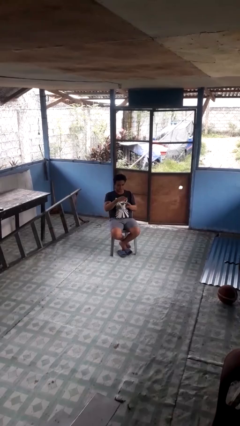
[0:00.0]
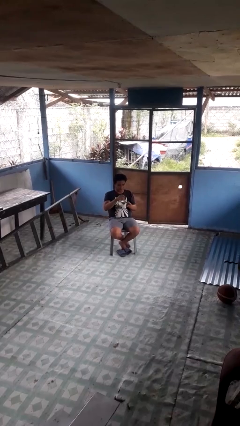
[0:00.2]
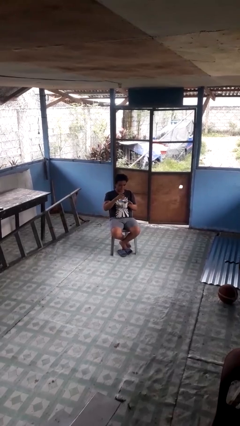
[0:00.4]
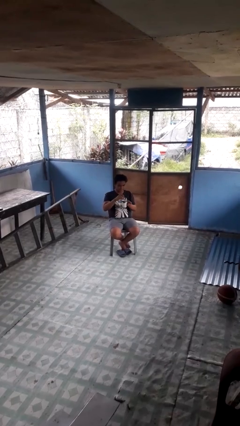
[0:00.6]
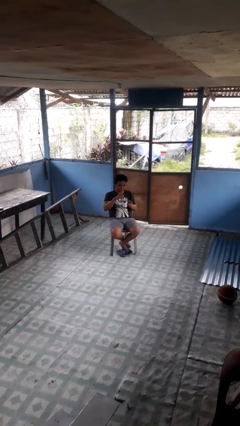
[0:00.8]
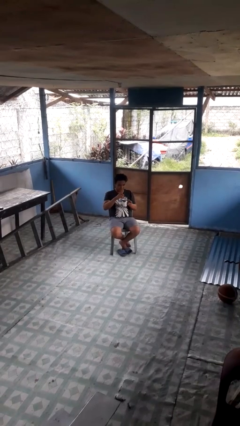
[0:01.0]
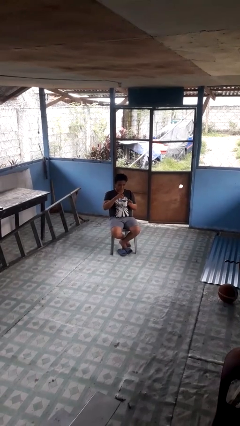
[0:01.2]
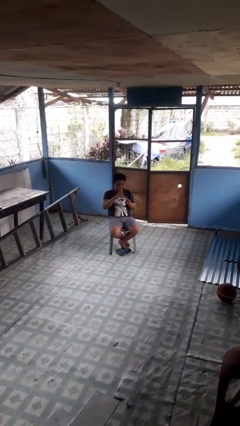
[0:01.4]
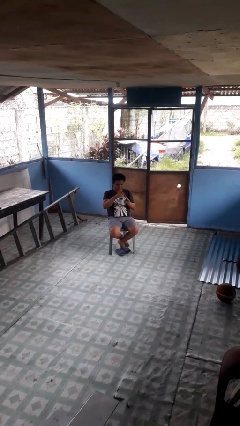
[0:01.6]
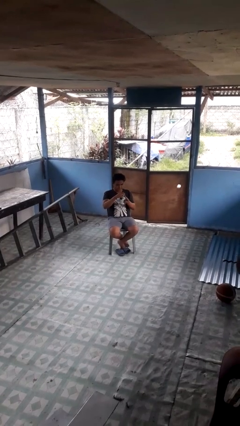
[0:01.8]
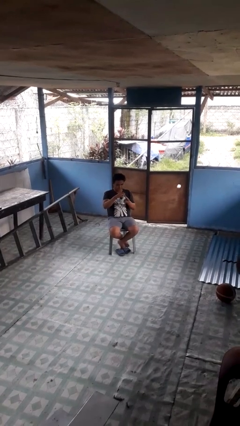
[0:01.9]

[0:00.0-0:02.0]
person stirs mug

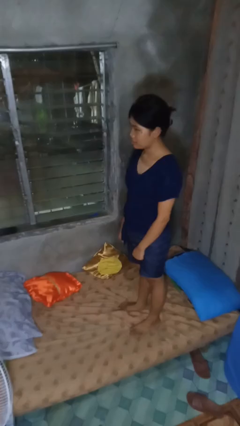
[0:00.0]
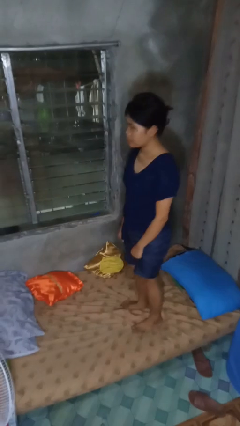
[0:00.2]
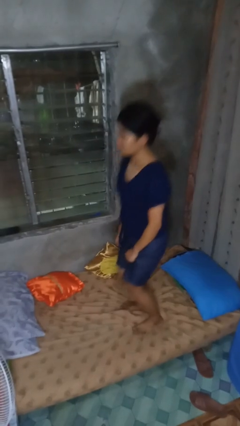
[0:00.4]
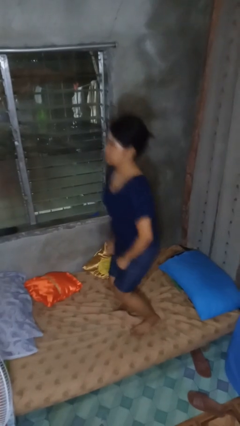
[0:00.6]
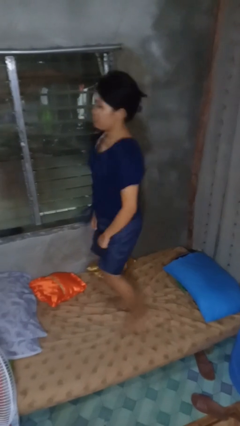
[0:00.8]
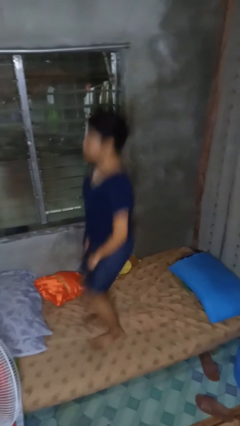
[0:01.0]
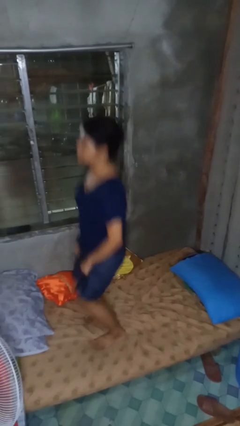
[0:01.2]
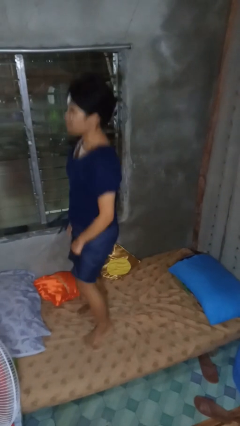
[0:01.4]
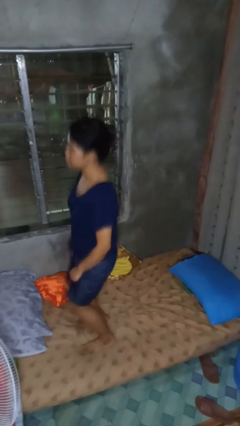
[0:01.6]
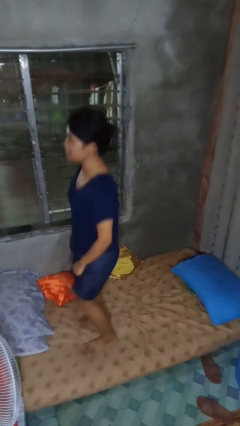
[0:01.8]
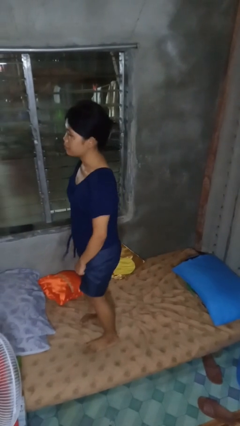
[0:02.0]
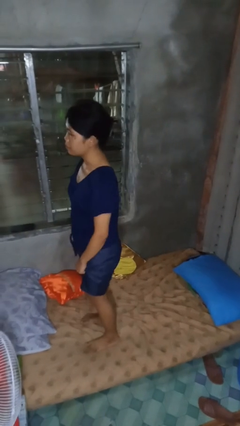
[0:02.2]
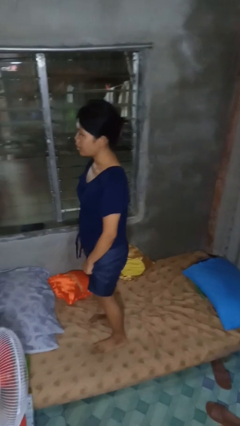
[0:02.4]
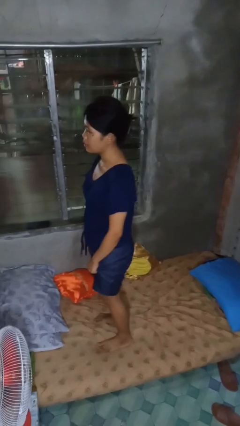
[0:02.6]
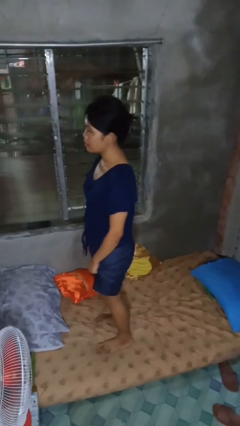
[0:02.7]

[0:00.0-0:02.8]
person jumps on bed

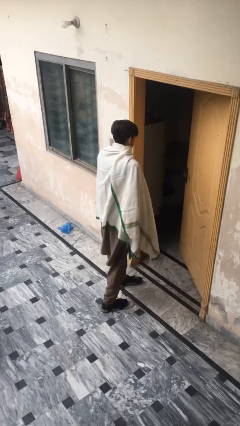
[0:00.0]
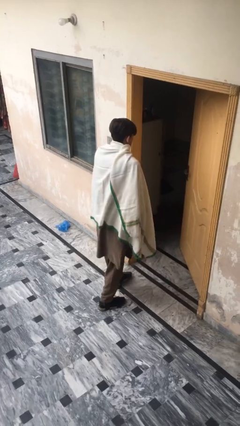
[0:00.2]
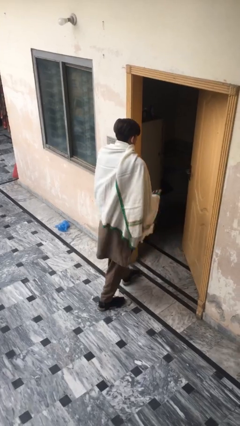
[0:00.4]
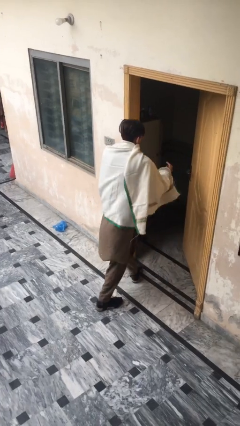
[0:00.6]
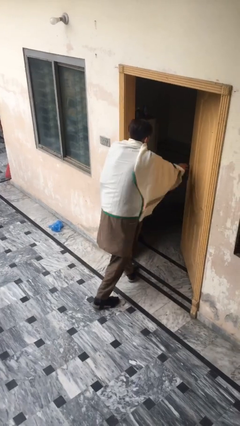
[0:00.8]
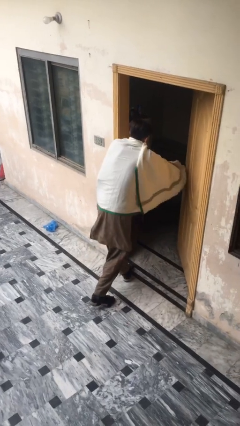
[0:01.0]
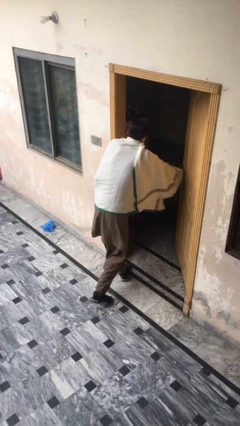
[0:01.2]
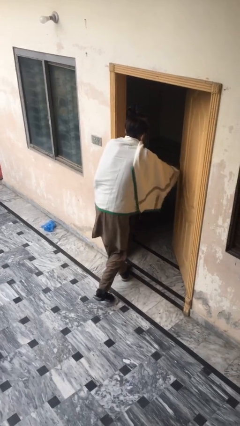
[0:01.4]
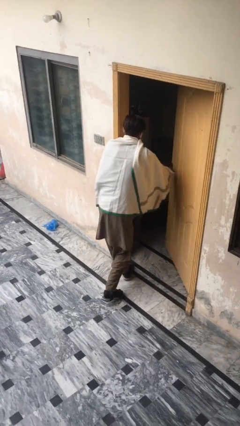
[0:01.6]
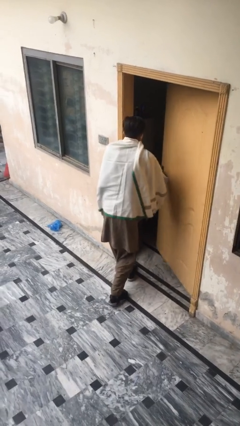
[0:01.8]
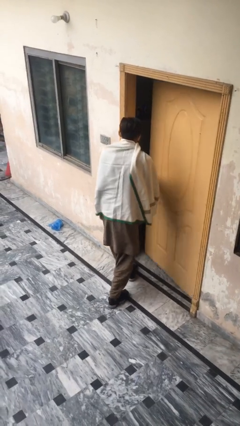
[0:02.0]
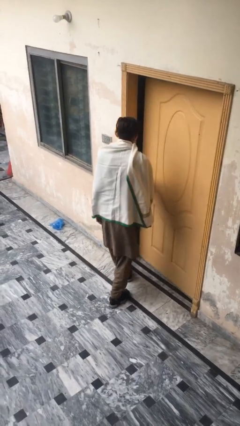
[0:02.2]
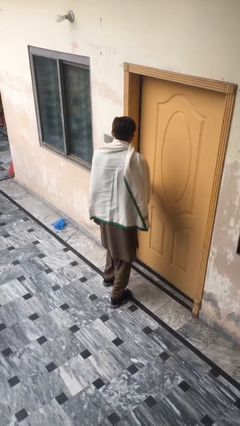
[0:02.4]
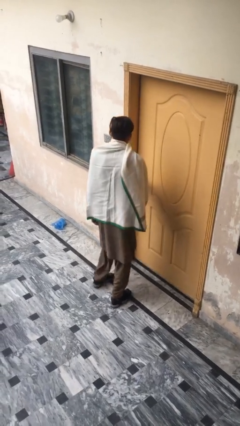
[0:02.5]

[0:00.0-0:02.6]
person closes facility door

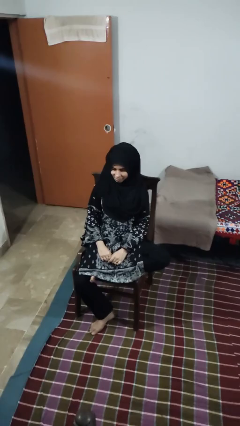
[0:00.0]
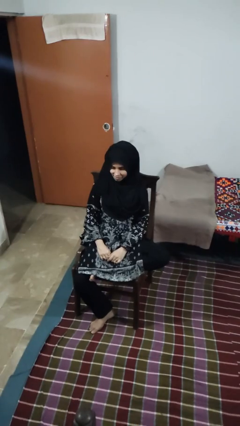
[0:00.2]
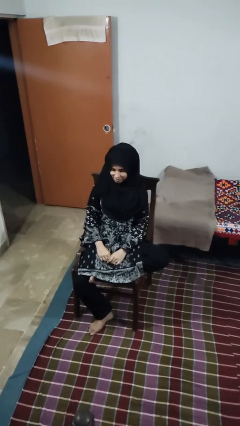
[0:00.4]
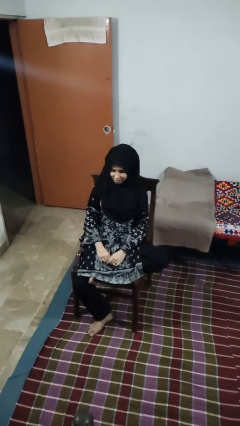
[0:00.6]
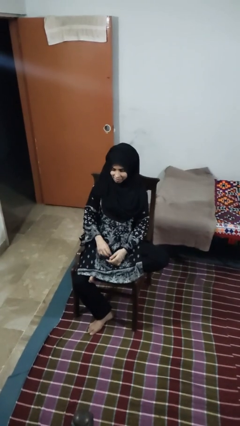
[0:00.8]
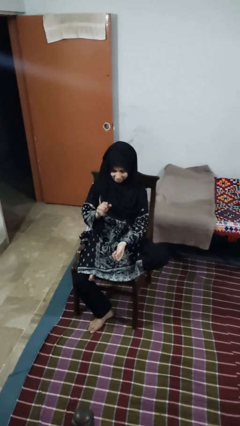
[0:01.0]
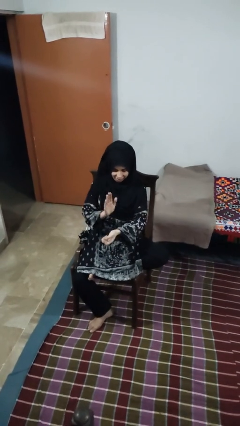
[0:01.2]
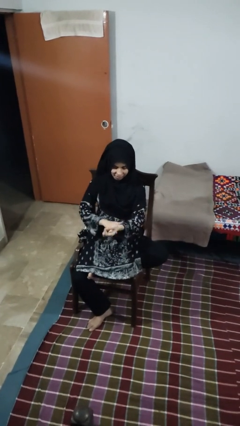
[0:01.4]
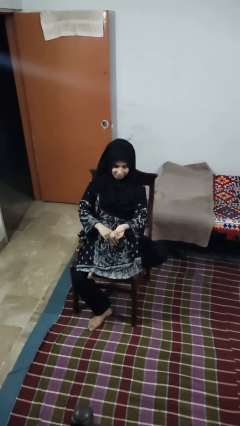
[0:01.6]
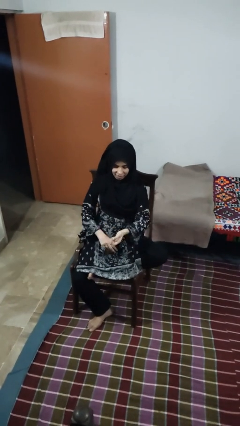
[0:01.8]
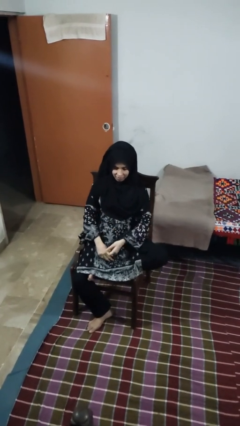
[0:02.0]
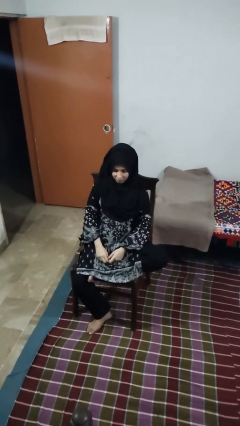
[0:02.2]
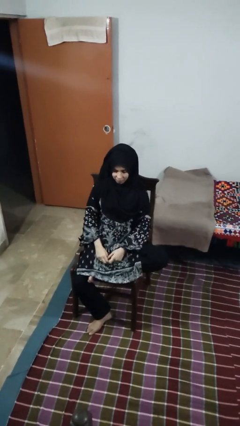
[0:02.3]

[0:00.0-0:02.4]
person swats bug

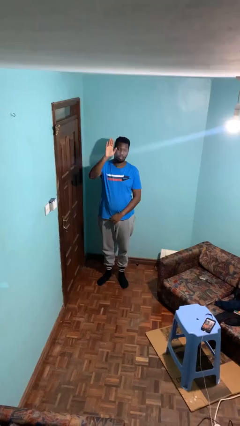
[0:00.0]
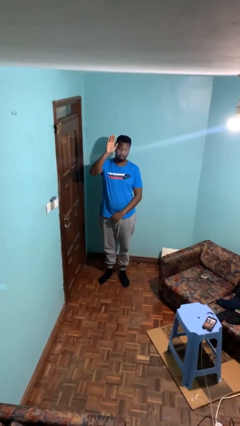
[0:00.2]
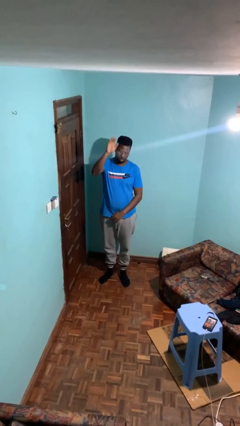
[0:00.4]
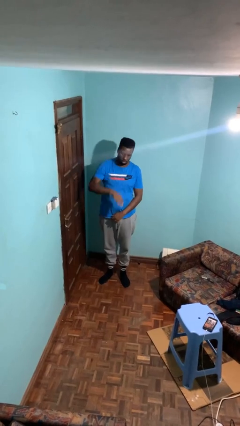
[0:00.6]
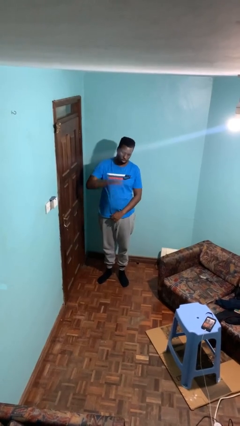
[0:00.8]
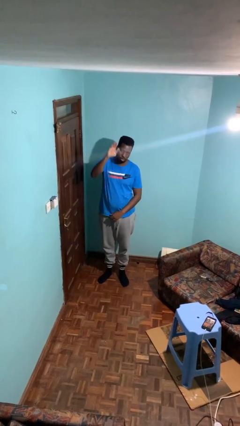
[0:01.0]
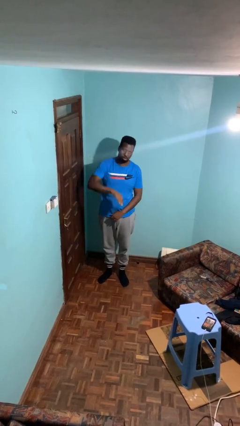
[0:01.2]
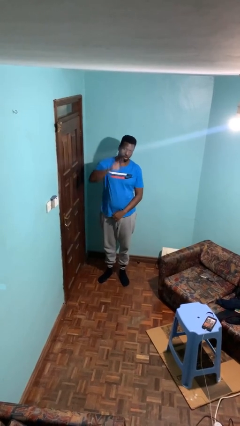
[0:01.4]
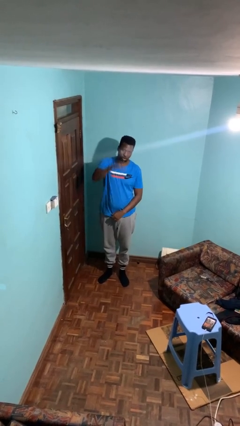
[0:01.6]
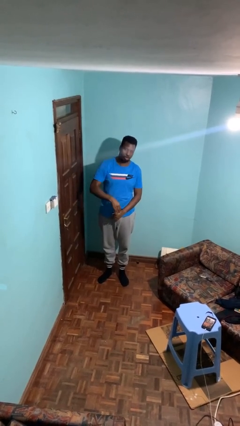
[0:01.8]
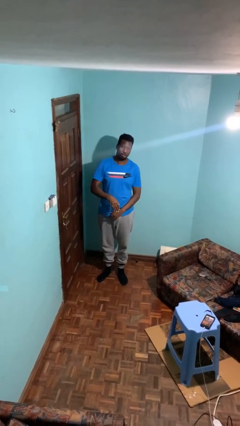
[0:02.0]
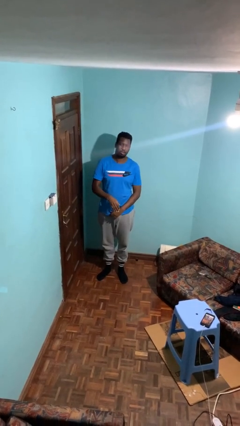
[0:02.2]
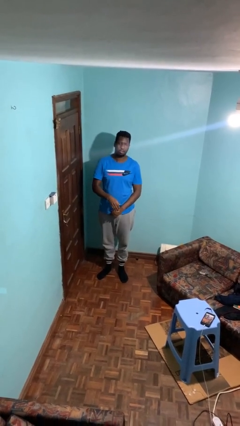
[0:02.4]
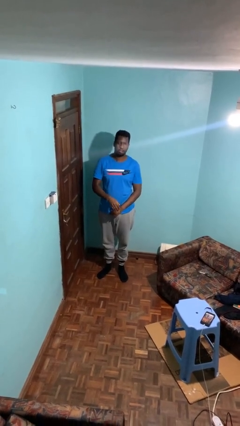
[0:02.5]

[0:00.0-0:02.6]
person gestures swipe down

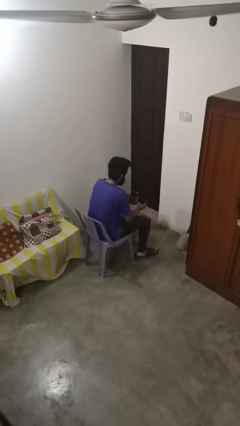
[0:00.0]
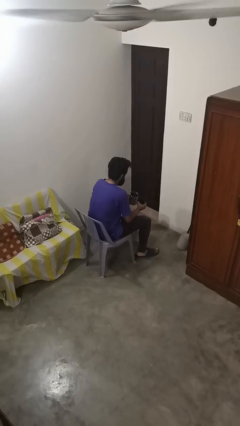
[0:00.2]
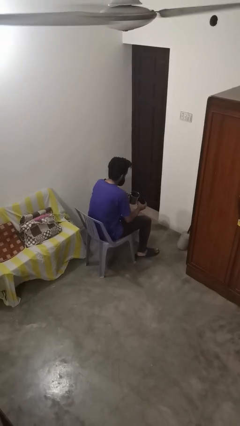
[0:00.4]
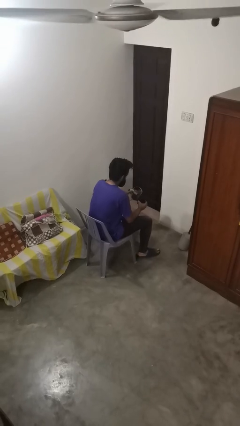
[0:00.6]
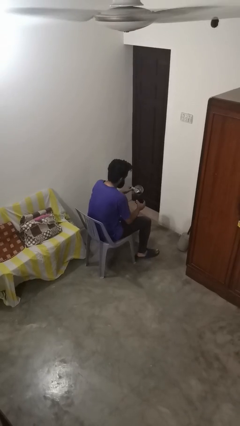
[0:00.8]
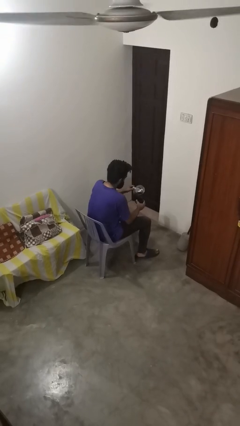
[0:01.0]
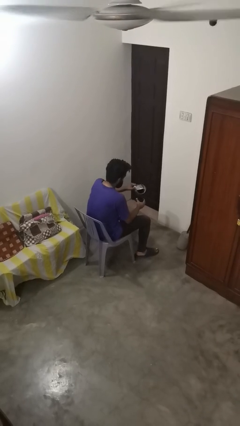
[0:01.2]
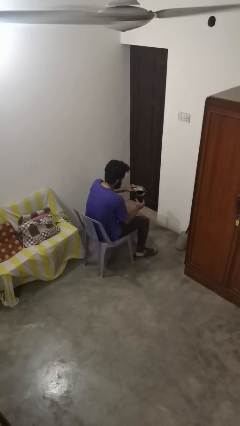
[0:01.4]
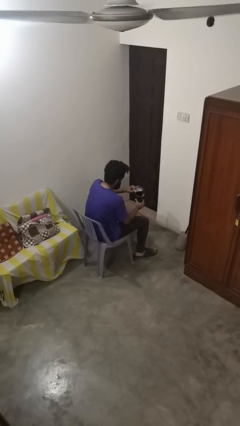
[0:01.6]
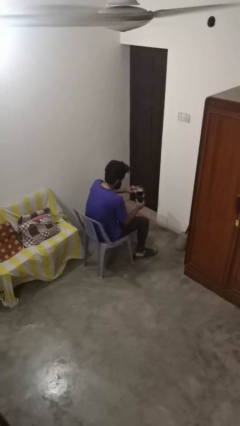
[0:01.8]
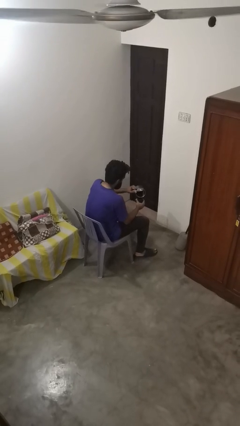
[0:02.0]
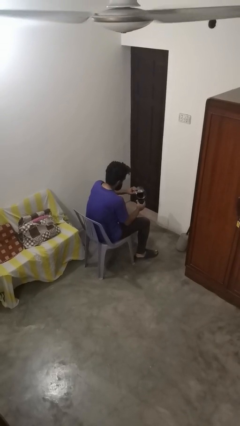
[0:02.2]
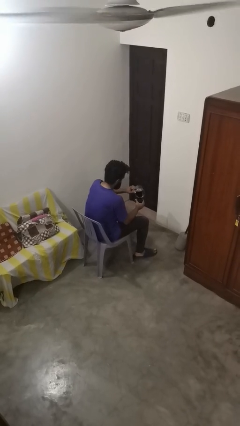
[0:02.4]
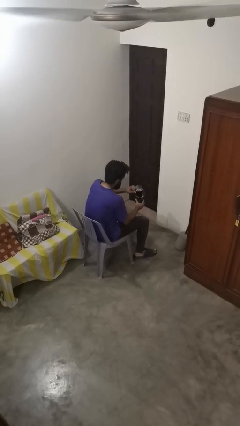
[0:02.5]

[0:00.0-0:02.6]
person pours coffee into mug

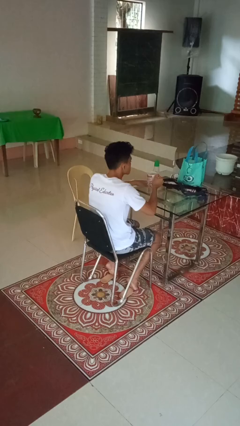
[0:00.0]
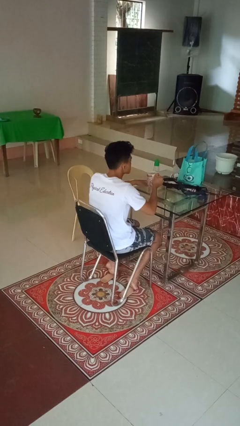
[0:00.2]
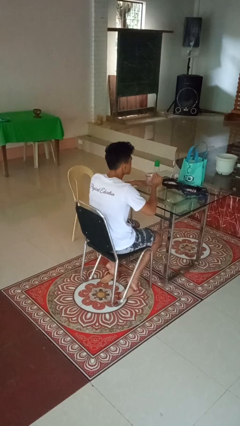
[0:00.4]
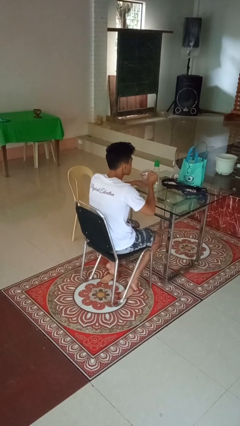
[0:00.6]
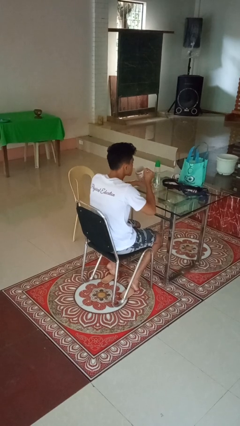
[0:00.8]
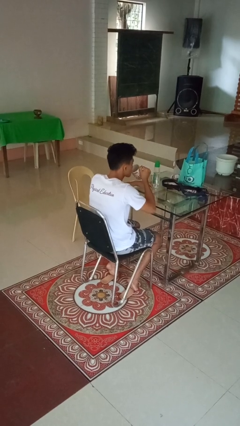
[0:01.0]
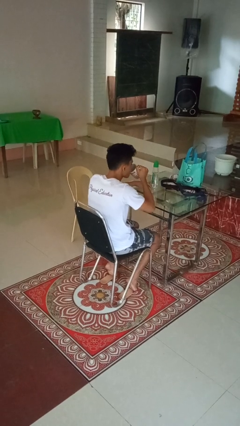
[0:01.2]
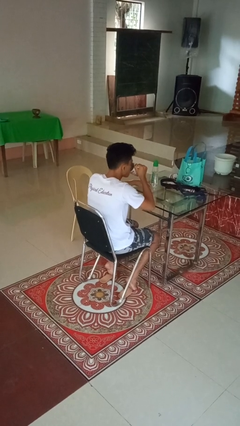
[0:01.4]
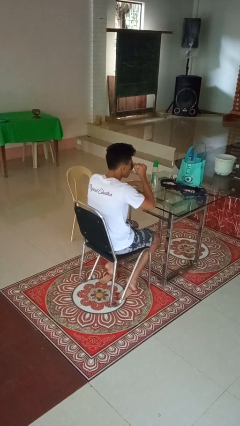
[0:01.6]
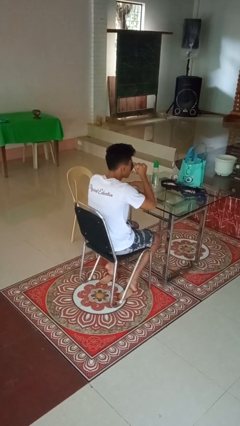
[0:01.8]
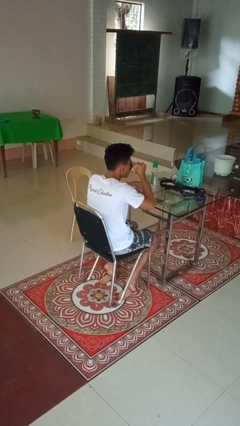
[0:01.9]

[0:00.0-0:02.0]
person picks up object from table
